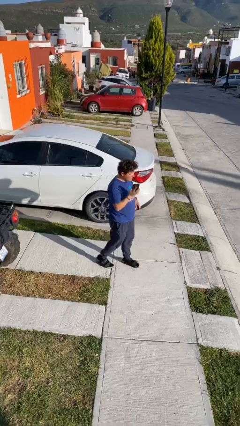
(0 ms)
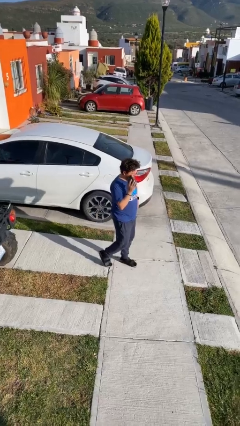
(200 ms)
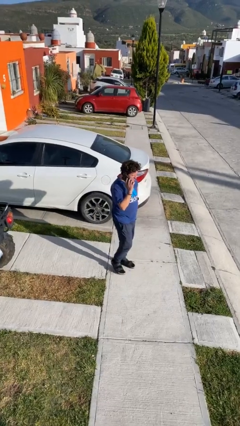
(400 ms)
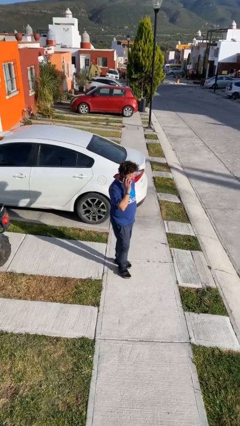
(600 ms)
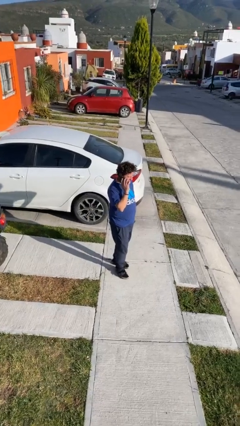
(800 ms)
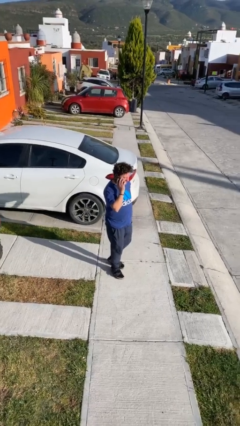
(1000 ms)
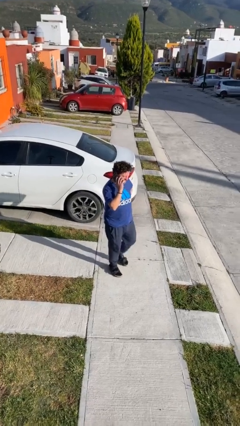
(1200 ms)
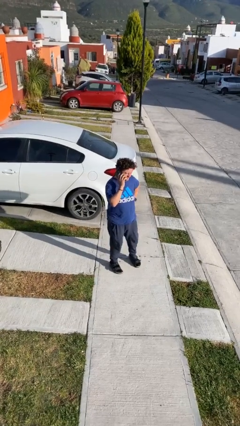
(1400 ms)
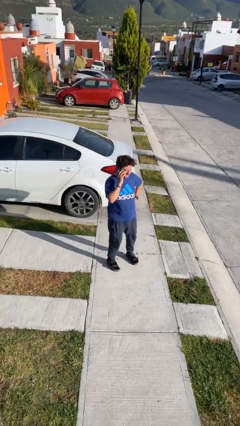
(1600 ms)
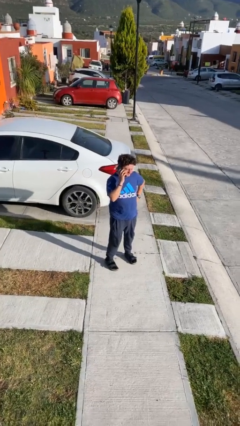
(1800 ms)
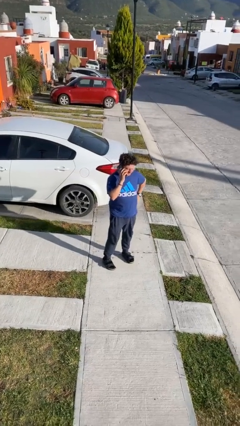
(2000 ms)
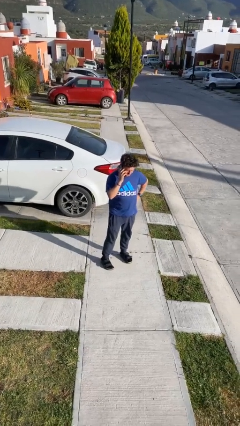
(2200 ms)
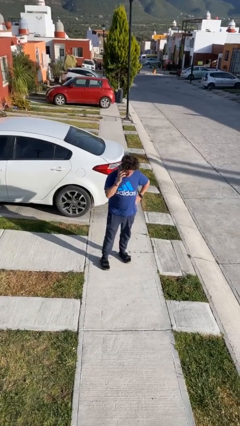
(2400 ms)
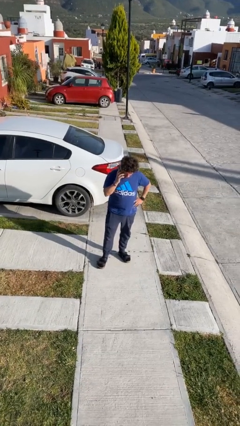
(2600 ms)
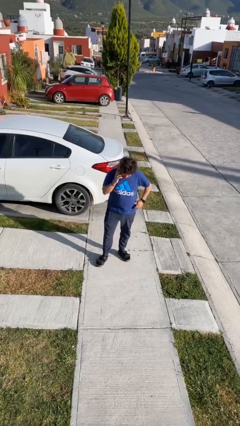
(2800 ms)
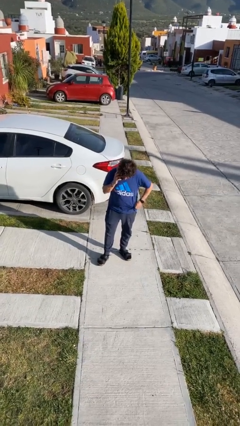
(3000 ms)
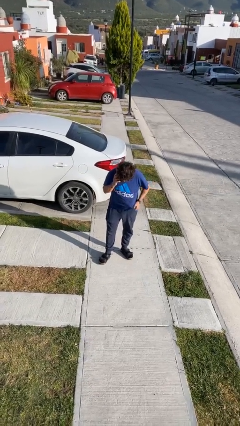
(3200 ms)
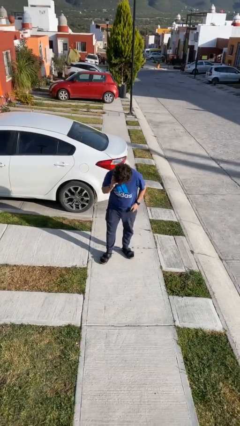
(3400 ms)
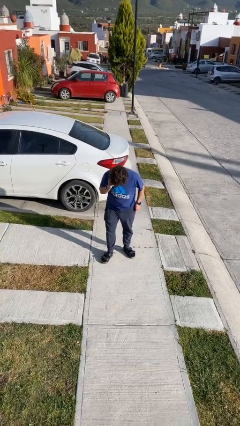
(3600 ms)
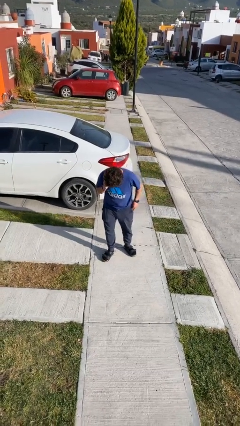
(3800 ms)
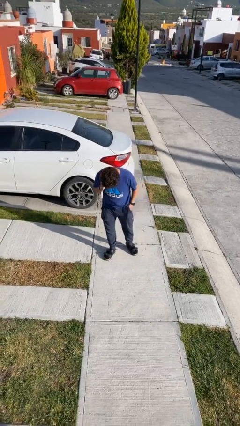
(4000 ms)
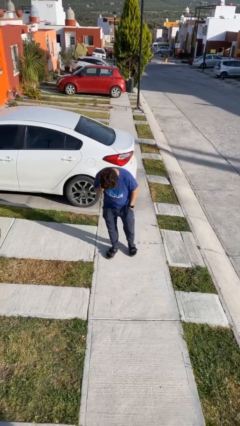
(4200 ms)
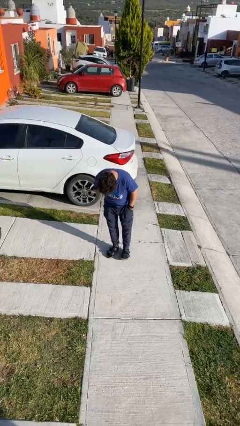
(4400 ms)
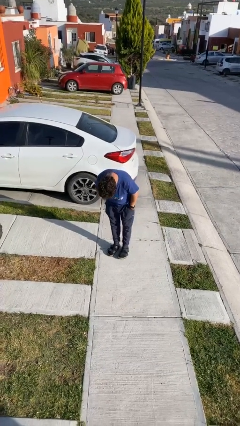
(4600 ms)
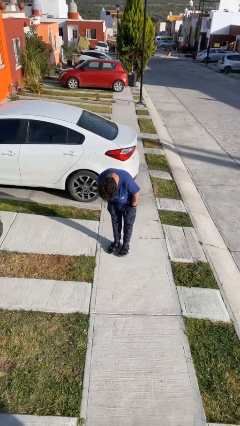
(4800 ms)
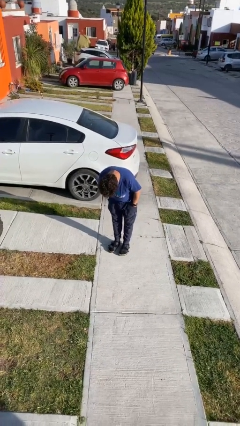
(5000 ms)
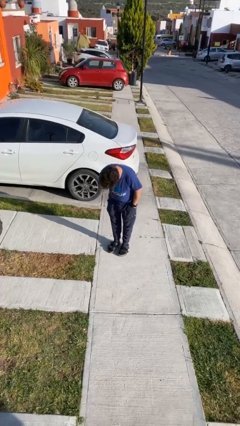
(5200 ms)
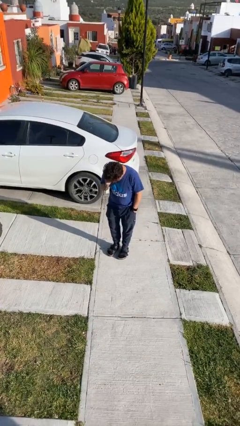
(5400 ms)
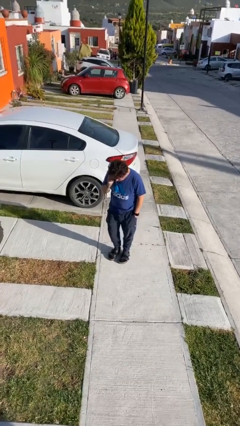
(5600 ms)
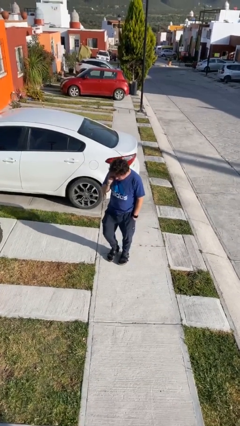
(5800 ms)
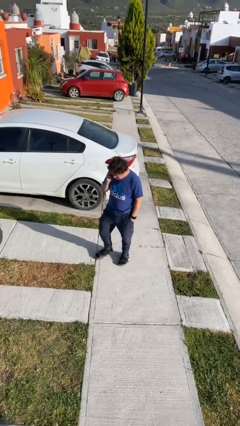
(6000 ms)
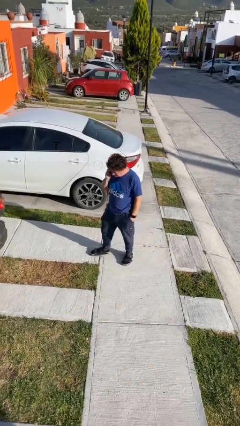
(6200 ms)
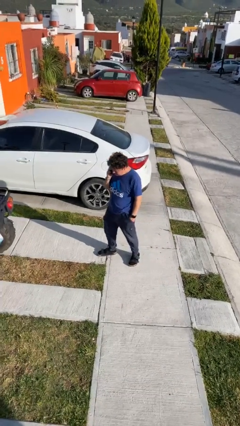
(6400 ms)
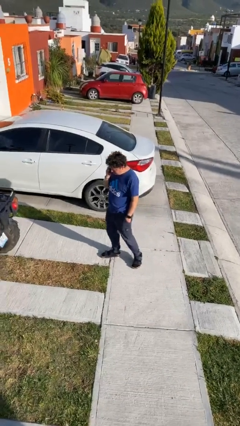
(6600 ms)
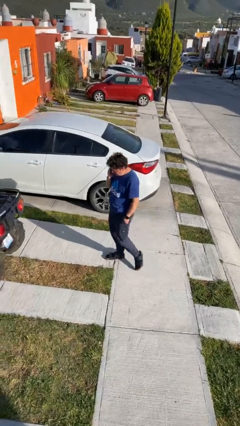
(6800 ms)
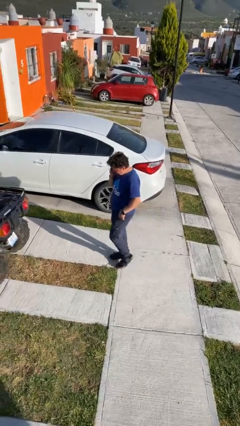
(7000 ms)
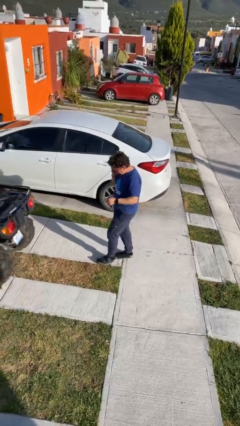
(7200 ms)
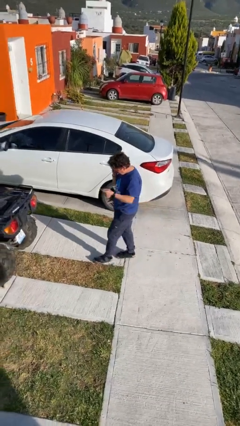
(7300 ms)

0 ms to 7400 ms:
person talks on phone

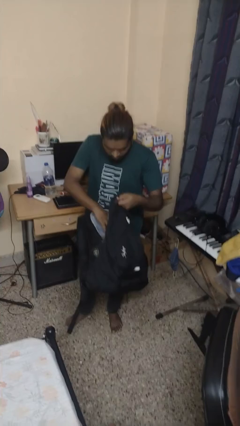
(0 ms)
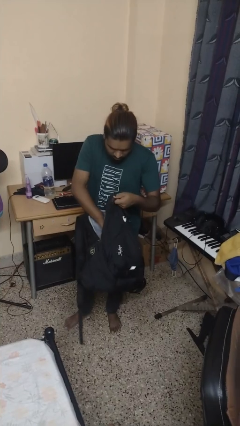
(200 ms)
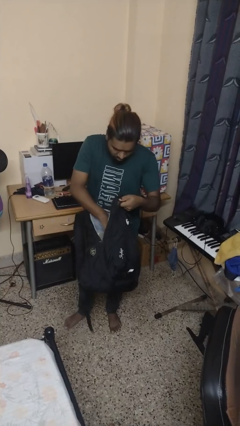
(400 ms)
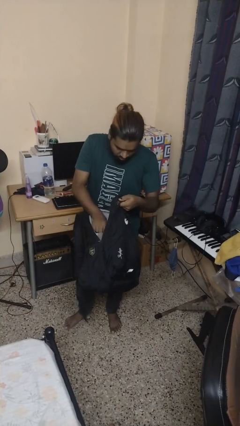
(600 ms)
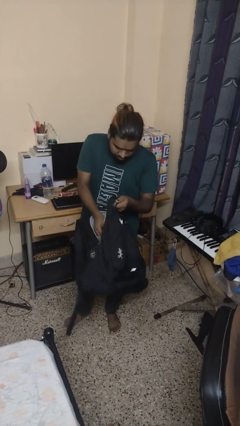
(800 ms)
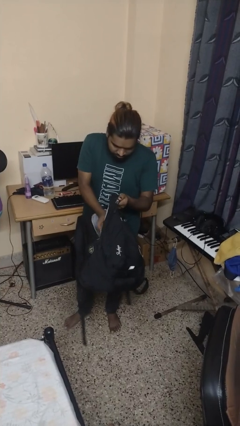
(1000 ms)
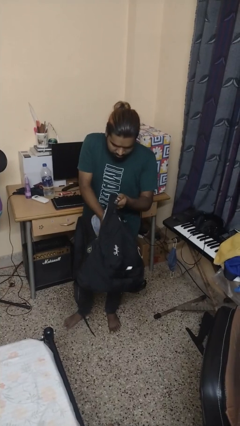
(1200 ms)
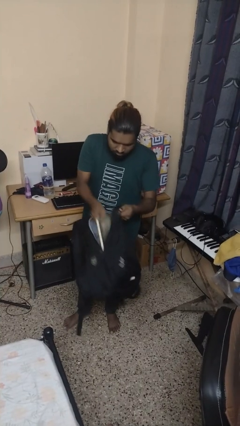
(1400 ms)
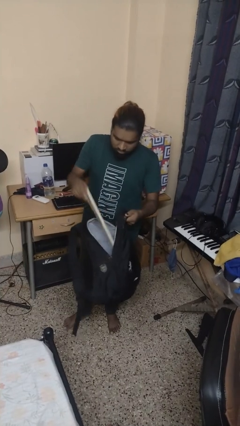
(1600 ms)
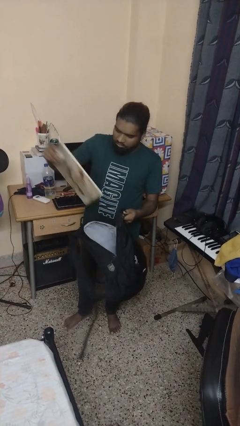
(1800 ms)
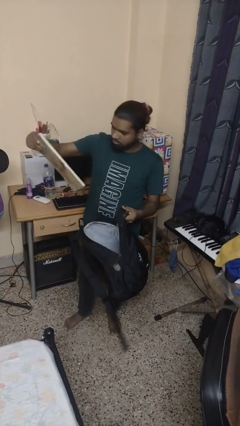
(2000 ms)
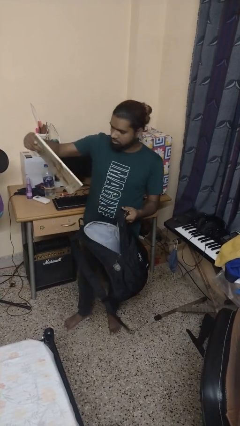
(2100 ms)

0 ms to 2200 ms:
person searches in backpack

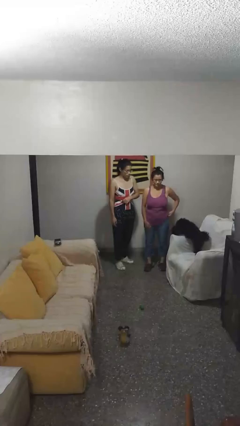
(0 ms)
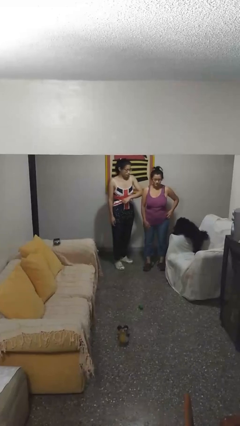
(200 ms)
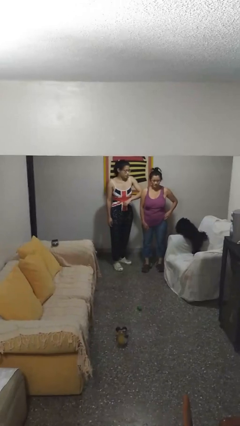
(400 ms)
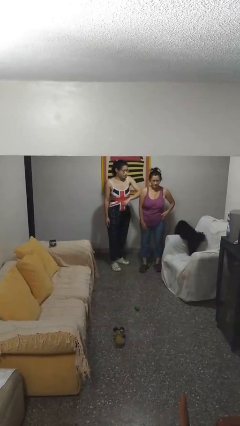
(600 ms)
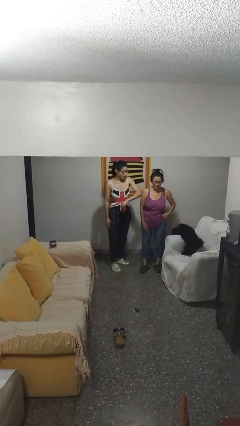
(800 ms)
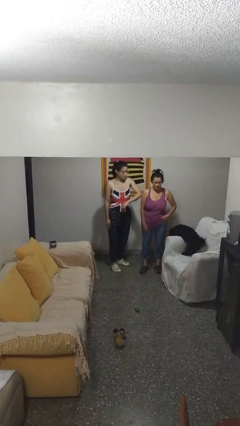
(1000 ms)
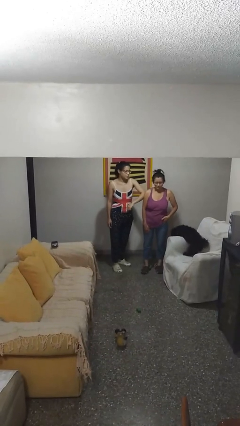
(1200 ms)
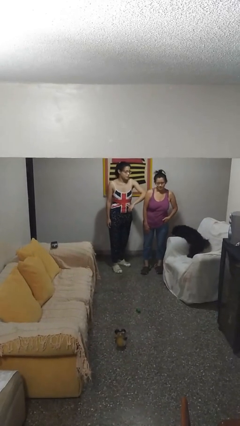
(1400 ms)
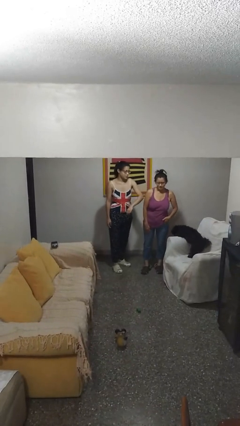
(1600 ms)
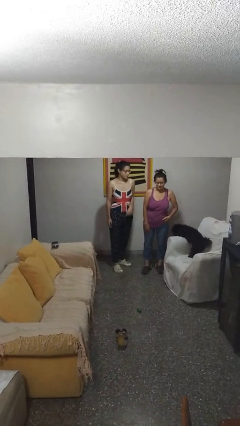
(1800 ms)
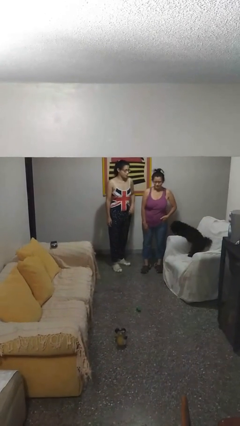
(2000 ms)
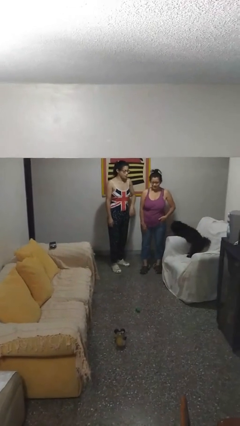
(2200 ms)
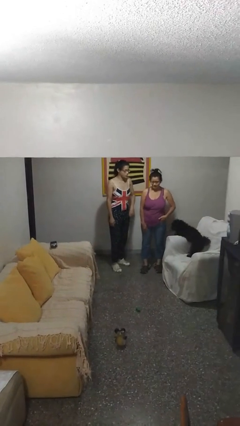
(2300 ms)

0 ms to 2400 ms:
person nudges person with elbow

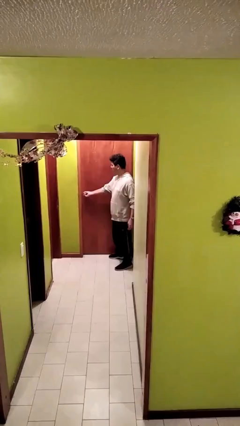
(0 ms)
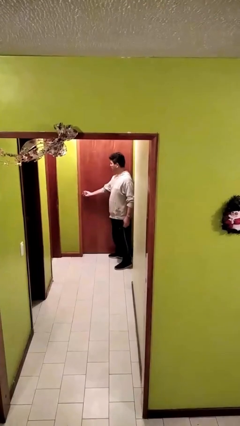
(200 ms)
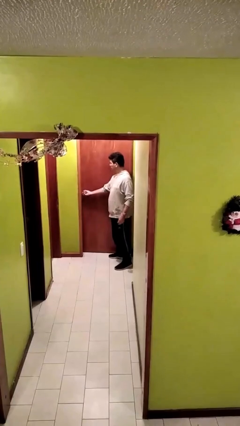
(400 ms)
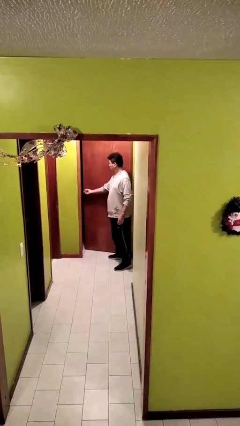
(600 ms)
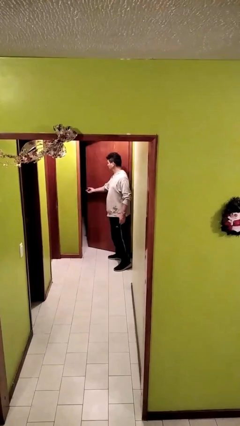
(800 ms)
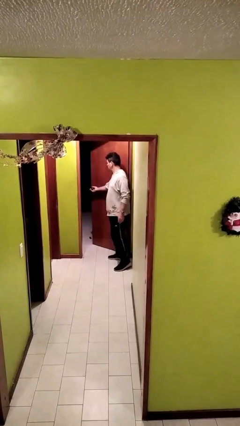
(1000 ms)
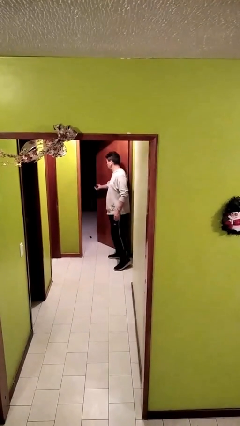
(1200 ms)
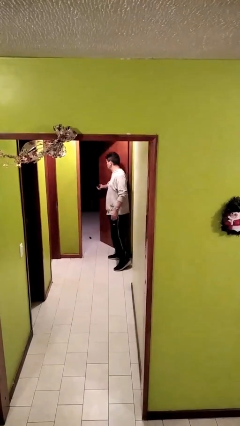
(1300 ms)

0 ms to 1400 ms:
person opens facility door

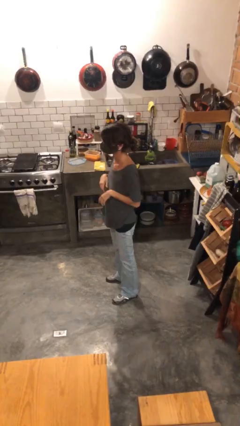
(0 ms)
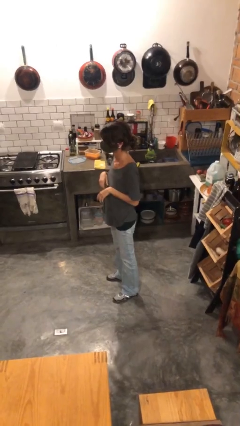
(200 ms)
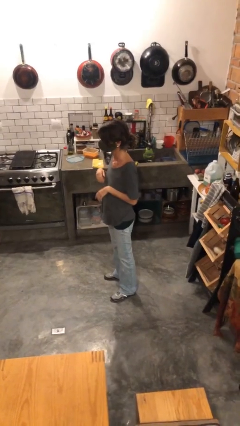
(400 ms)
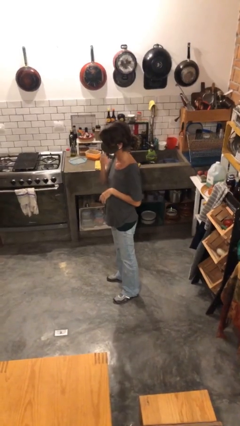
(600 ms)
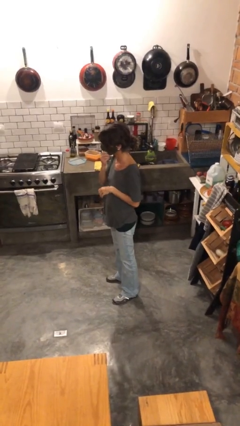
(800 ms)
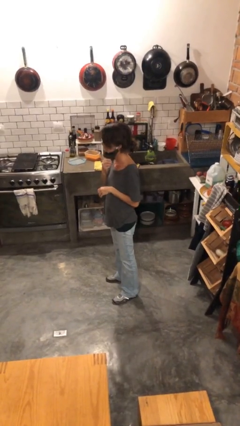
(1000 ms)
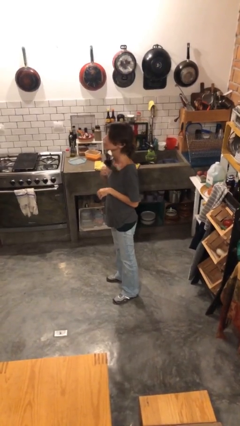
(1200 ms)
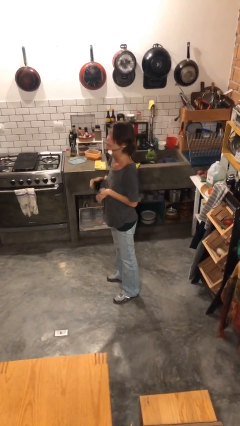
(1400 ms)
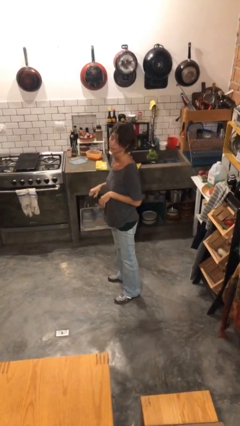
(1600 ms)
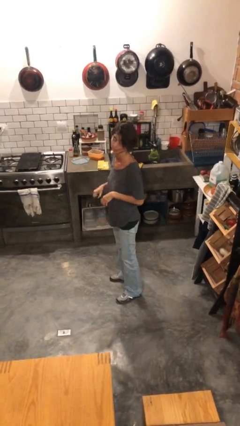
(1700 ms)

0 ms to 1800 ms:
person takes off facemask

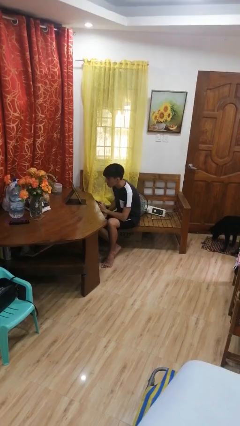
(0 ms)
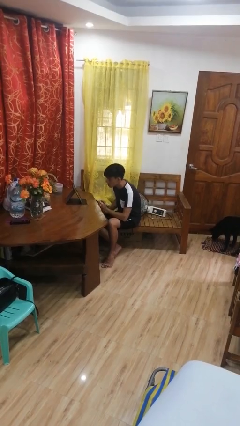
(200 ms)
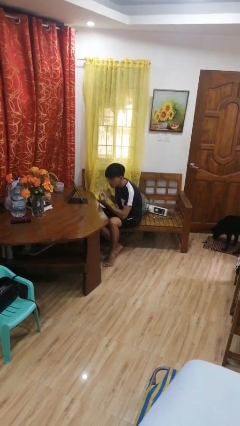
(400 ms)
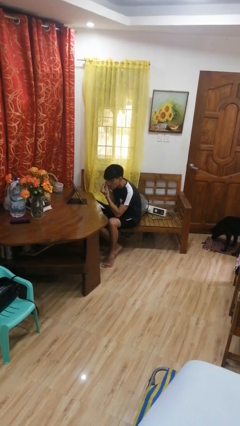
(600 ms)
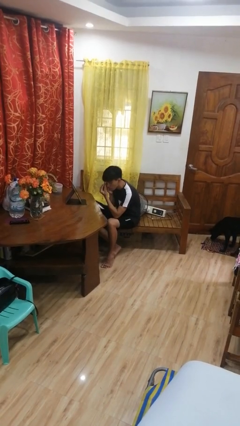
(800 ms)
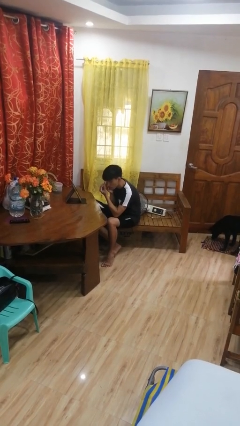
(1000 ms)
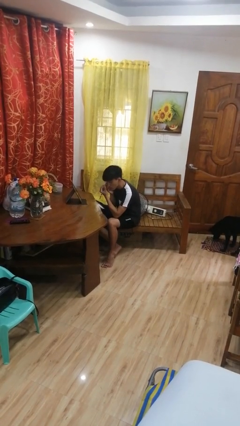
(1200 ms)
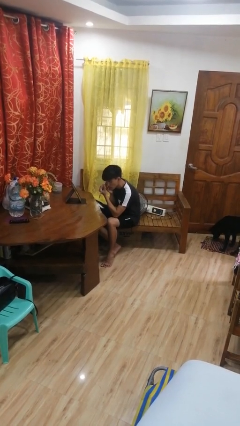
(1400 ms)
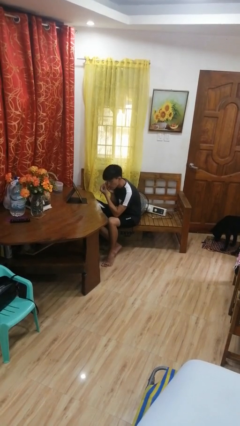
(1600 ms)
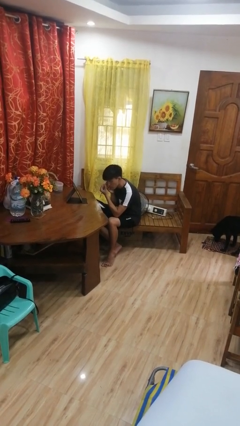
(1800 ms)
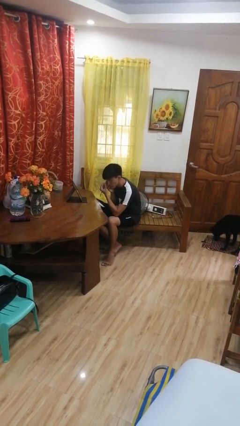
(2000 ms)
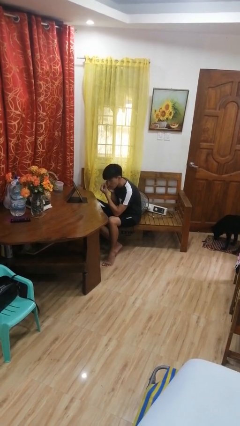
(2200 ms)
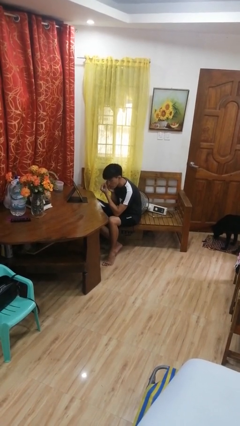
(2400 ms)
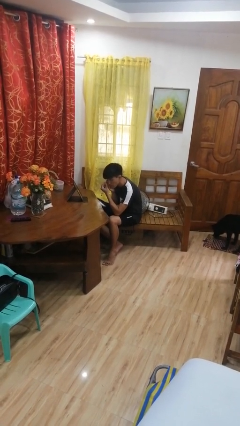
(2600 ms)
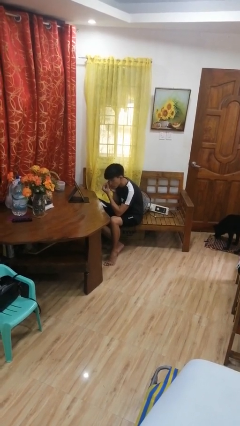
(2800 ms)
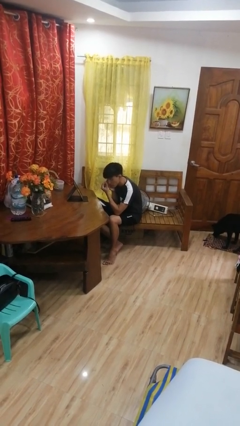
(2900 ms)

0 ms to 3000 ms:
person applies eye makeup
